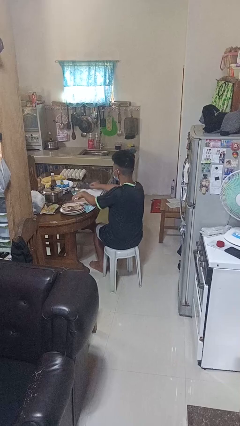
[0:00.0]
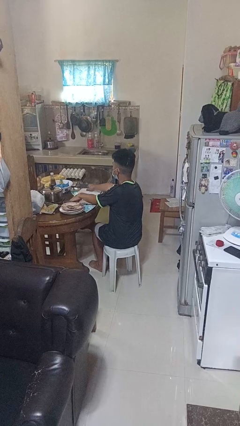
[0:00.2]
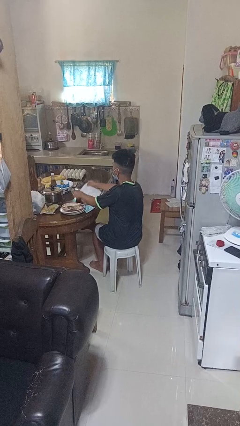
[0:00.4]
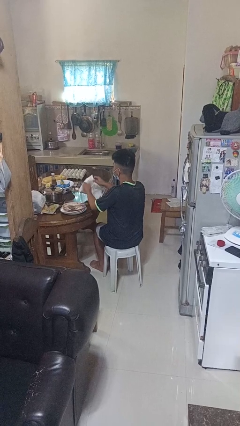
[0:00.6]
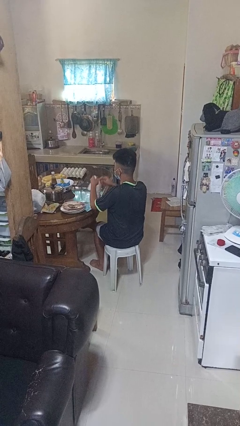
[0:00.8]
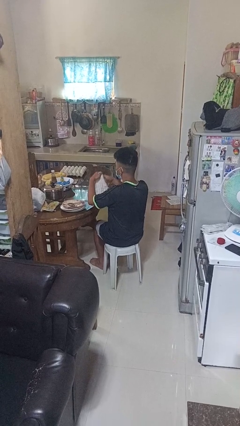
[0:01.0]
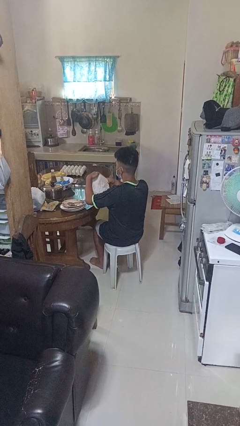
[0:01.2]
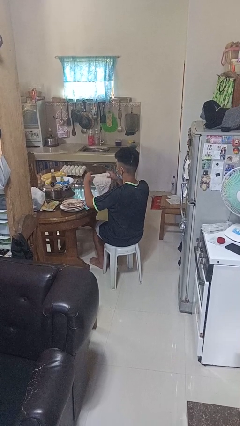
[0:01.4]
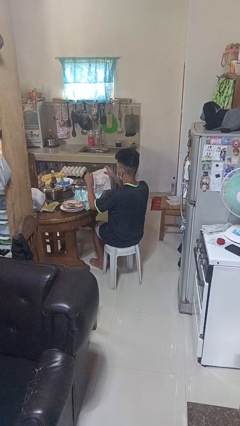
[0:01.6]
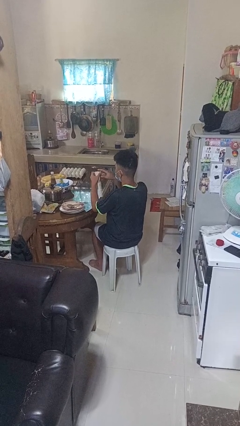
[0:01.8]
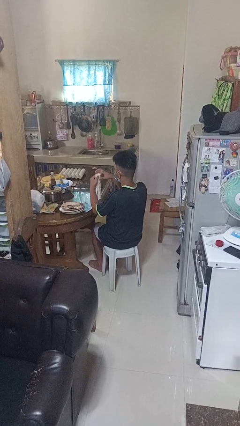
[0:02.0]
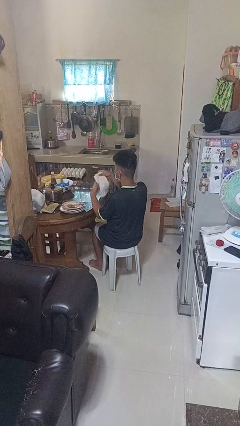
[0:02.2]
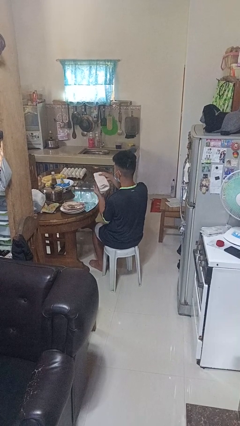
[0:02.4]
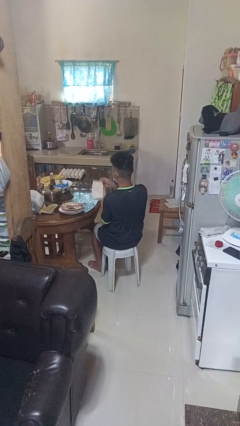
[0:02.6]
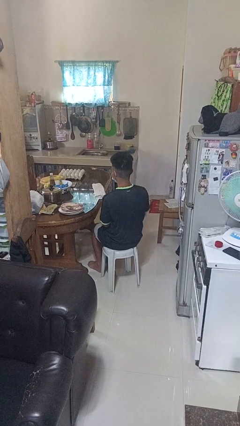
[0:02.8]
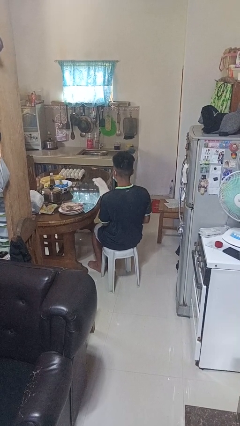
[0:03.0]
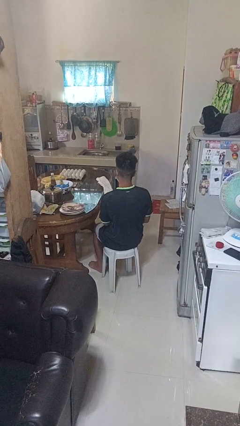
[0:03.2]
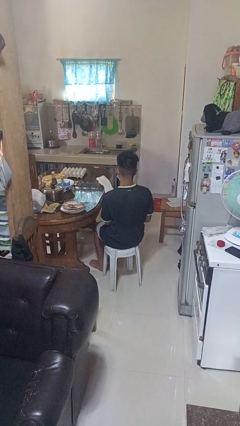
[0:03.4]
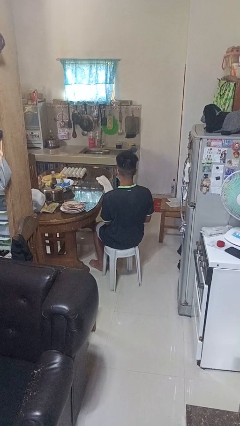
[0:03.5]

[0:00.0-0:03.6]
person folds tablecloth

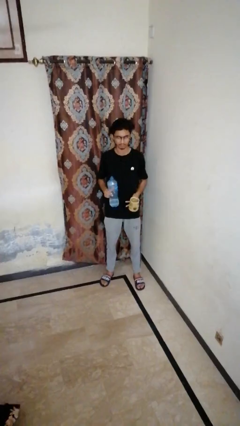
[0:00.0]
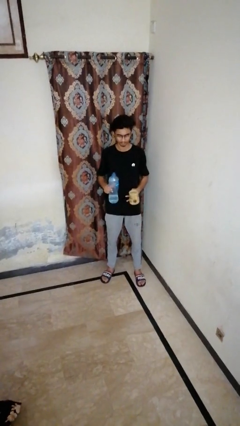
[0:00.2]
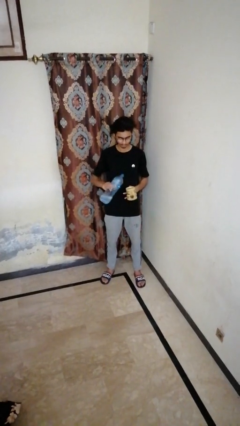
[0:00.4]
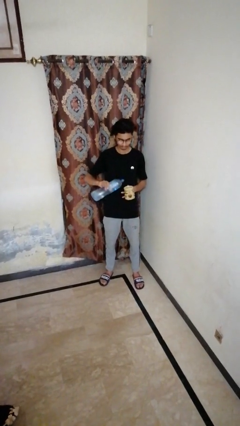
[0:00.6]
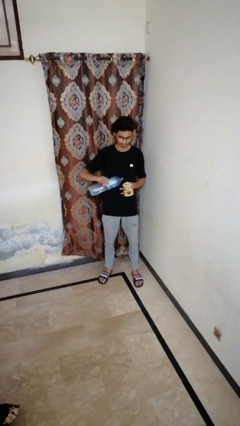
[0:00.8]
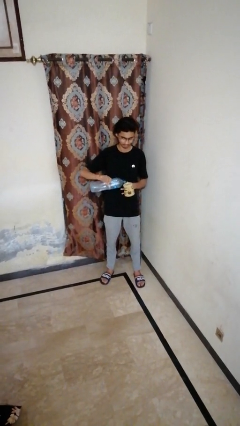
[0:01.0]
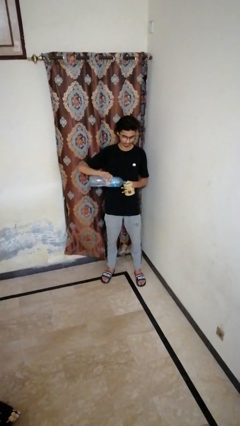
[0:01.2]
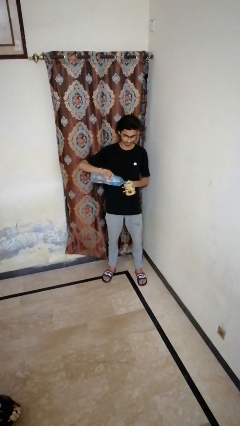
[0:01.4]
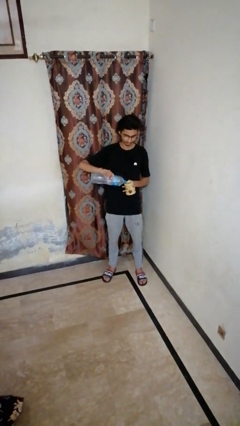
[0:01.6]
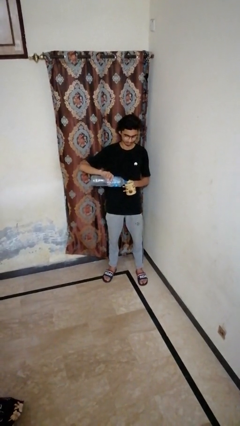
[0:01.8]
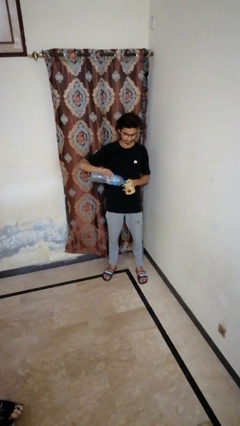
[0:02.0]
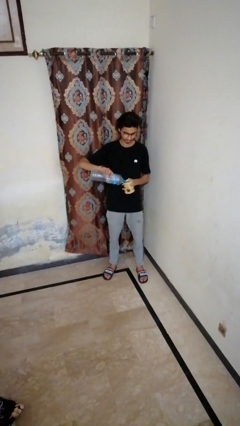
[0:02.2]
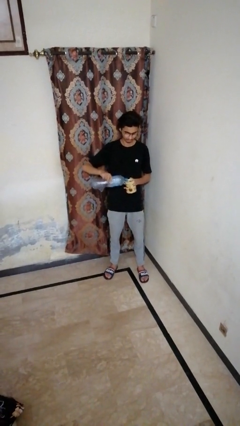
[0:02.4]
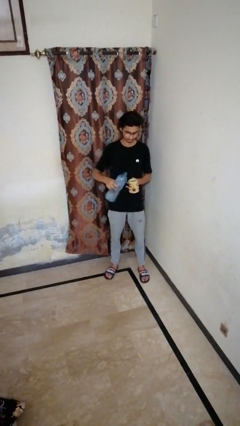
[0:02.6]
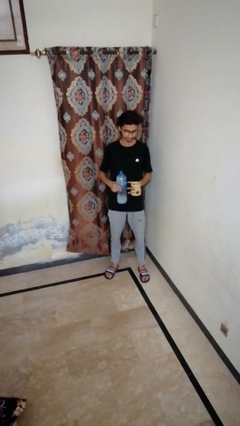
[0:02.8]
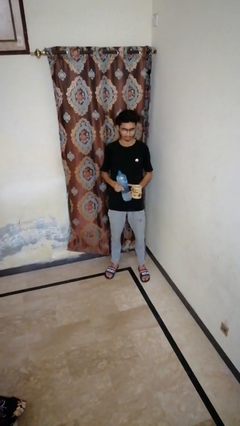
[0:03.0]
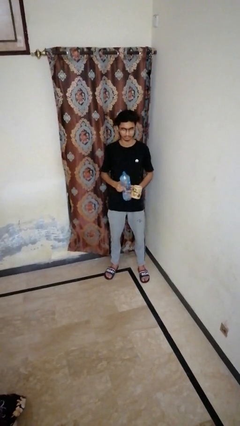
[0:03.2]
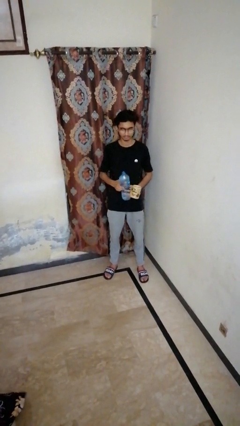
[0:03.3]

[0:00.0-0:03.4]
person pours liquid into cup

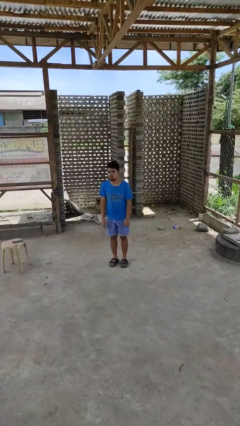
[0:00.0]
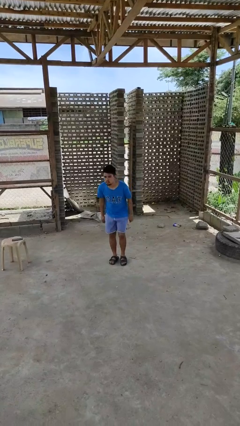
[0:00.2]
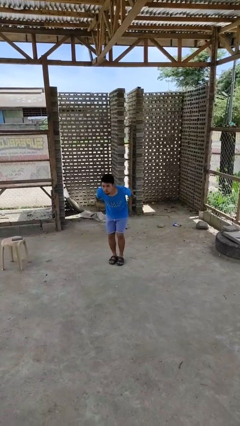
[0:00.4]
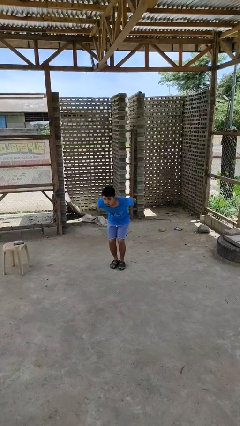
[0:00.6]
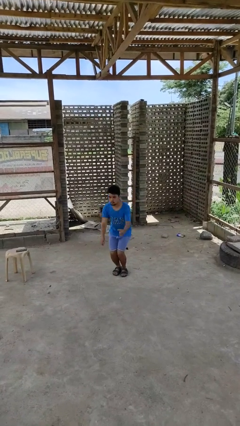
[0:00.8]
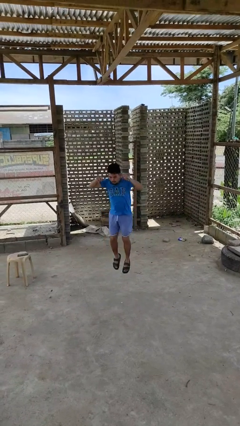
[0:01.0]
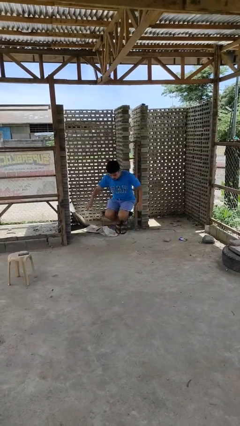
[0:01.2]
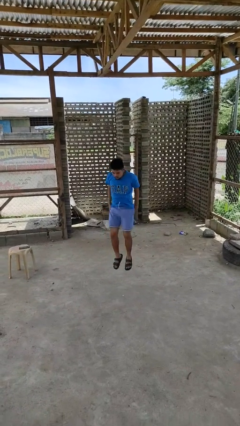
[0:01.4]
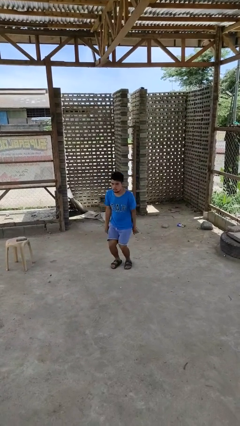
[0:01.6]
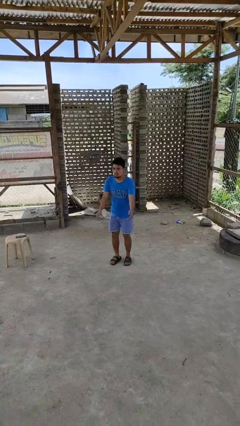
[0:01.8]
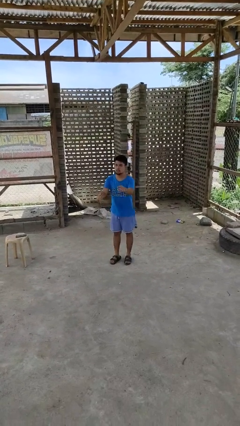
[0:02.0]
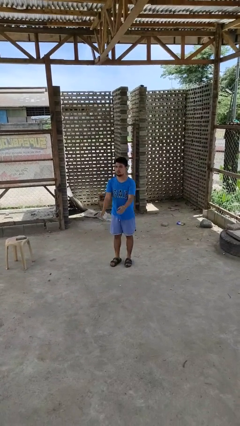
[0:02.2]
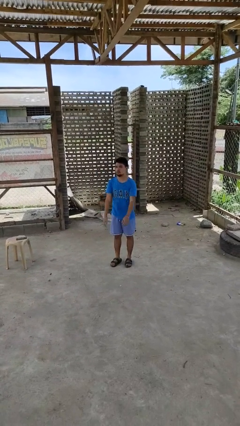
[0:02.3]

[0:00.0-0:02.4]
person jumps

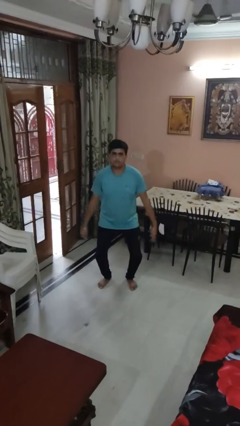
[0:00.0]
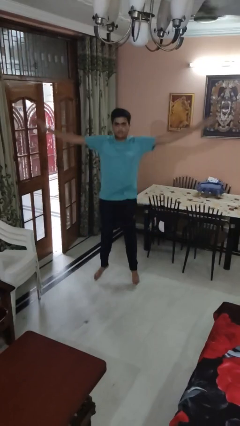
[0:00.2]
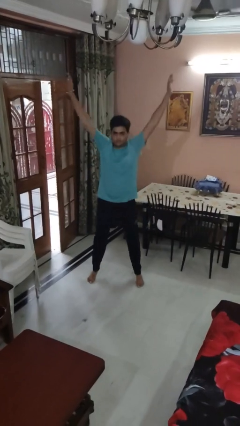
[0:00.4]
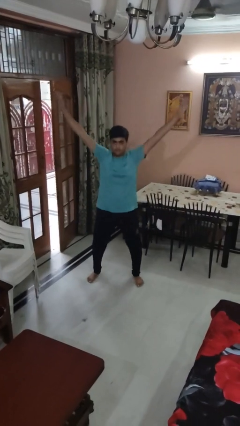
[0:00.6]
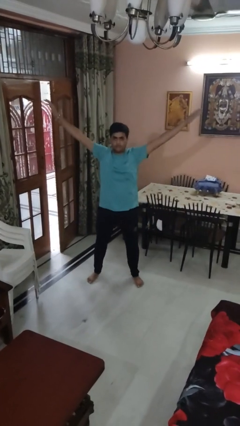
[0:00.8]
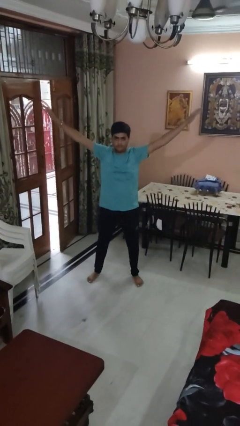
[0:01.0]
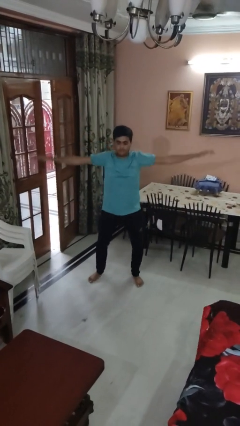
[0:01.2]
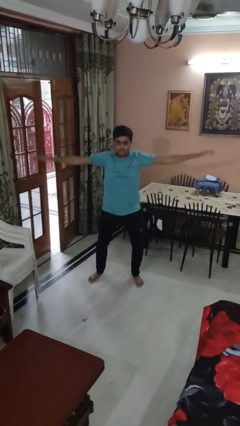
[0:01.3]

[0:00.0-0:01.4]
person exercises with jumping jacks

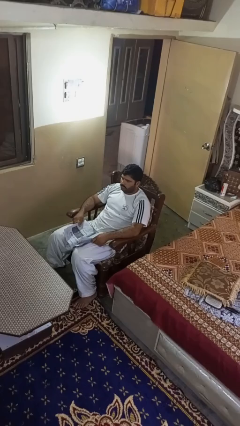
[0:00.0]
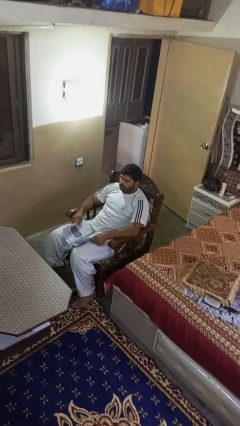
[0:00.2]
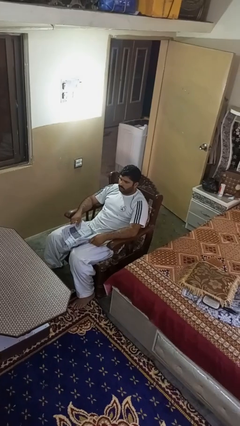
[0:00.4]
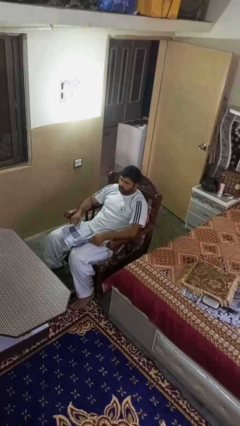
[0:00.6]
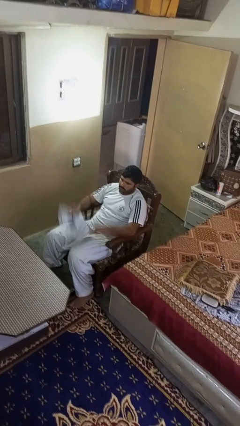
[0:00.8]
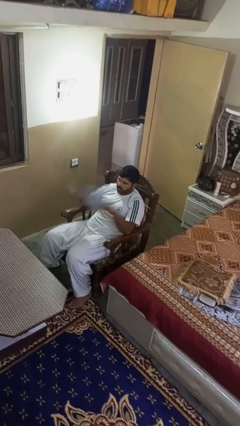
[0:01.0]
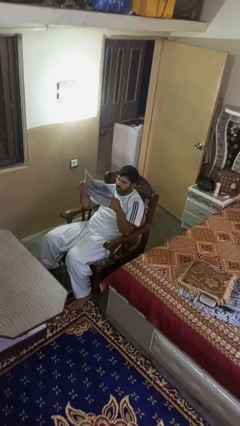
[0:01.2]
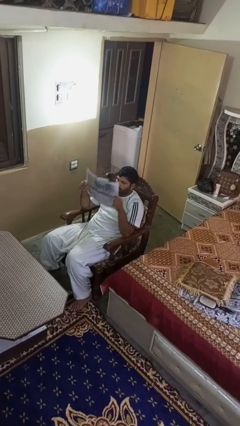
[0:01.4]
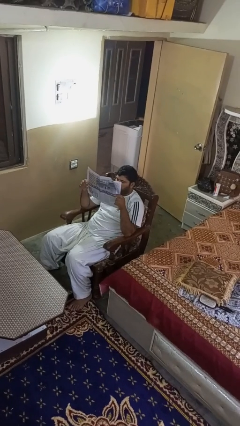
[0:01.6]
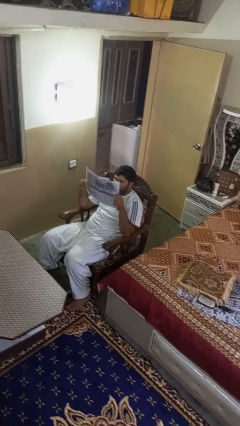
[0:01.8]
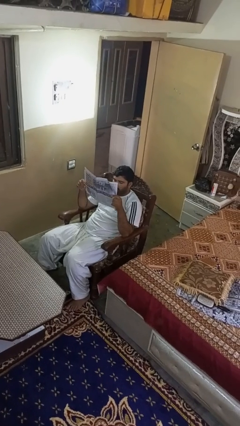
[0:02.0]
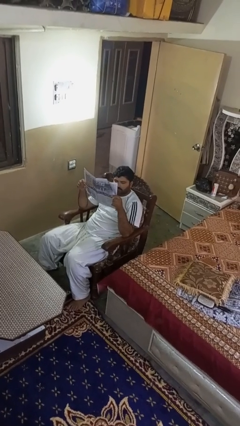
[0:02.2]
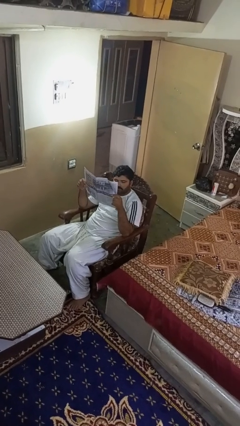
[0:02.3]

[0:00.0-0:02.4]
person reads newspaper

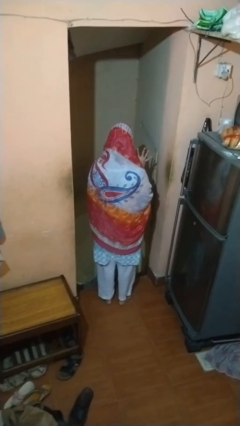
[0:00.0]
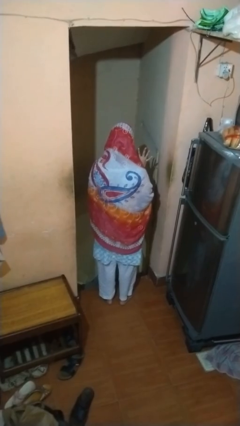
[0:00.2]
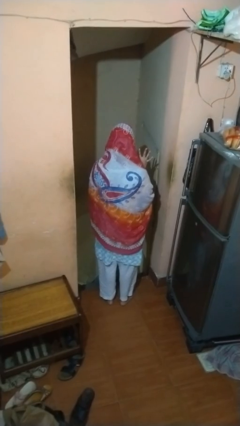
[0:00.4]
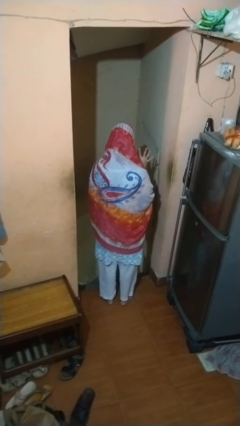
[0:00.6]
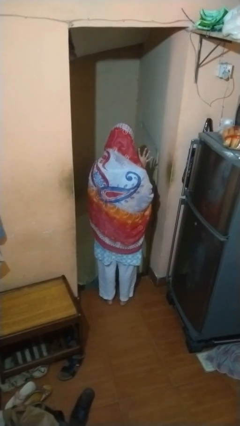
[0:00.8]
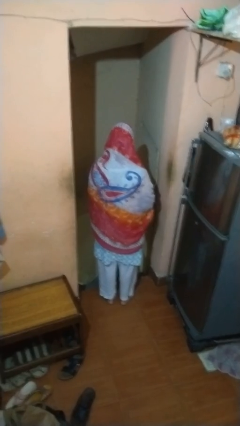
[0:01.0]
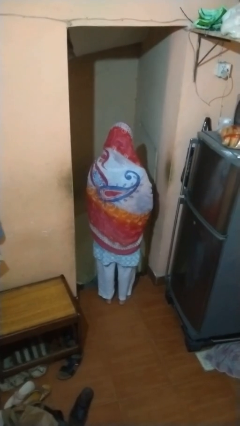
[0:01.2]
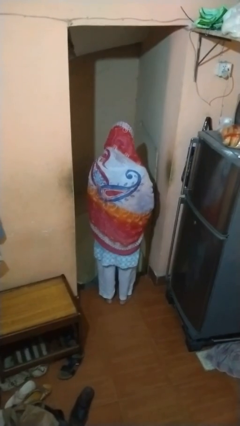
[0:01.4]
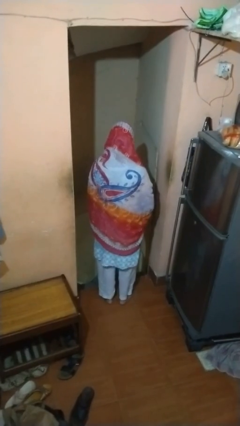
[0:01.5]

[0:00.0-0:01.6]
person gestures number four

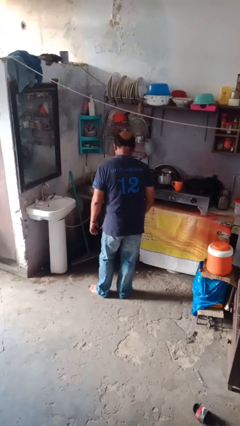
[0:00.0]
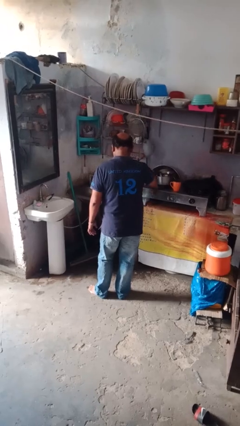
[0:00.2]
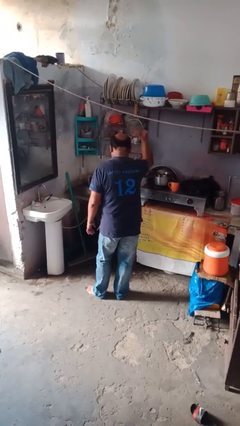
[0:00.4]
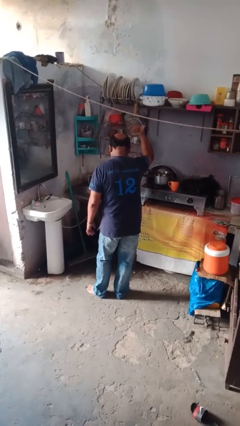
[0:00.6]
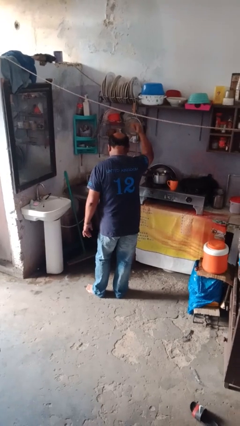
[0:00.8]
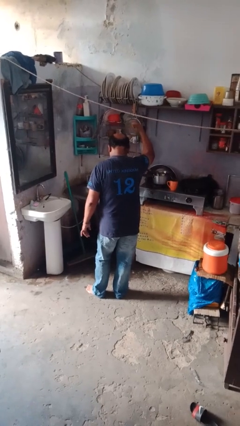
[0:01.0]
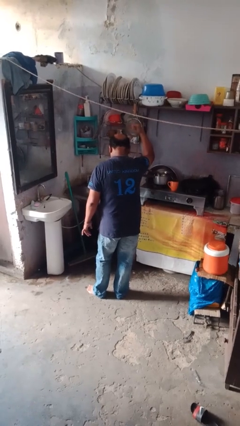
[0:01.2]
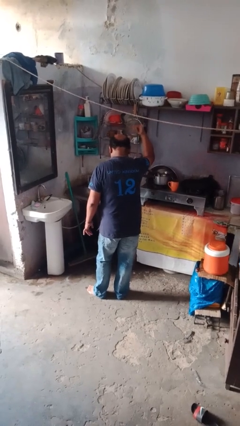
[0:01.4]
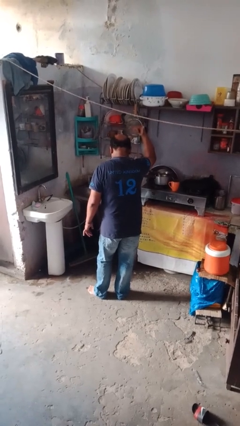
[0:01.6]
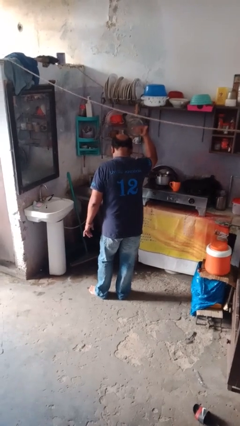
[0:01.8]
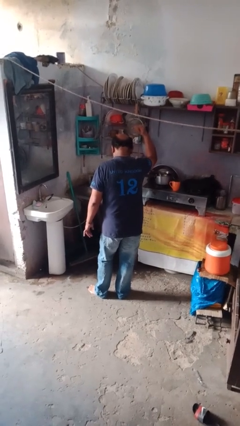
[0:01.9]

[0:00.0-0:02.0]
person gestures hang loose

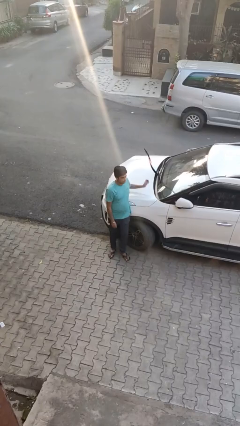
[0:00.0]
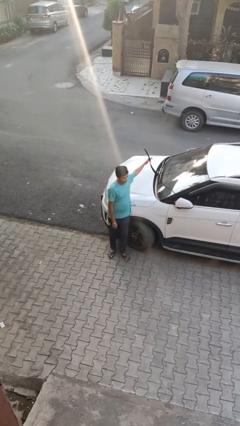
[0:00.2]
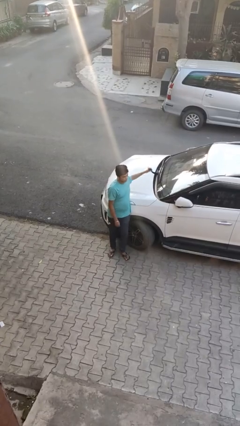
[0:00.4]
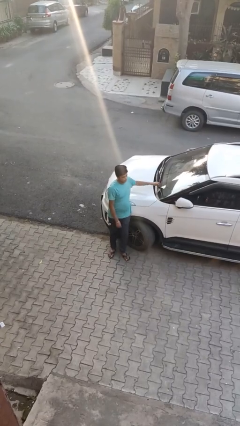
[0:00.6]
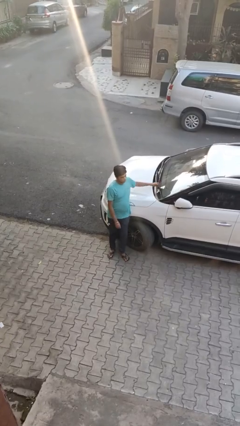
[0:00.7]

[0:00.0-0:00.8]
person flips down car wipers
